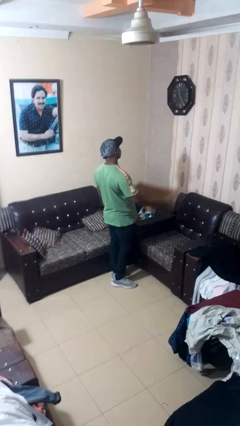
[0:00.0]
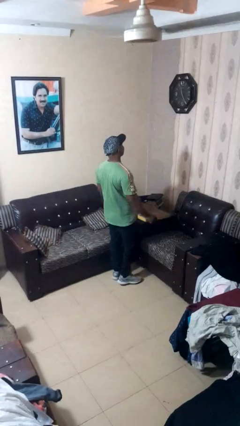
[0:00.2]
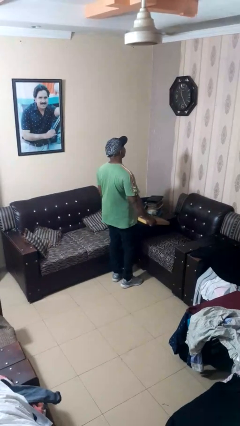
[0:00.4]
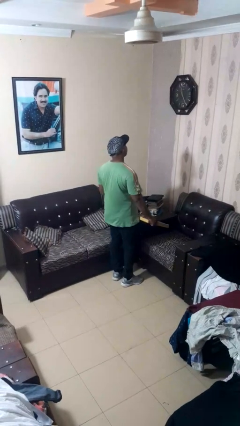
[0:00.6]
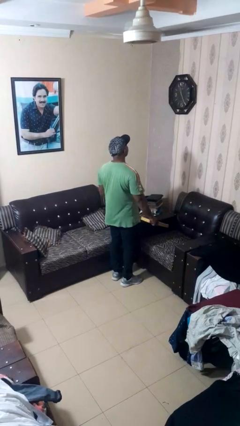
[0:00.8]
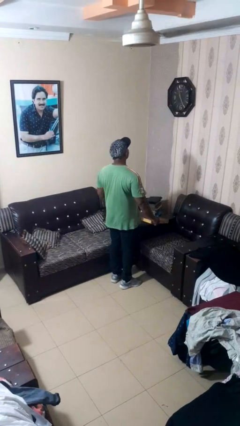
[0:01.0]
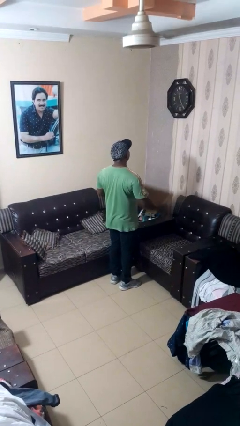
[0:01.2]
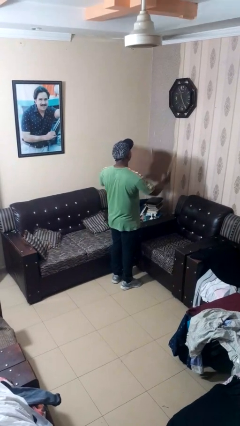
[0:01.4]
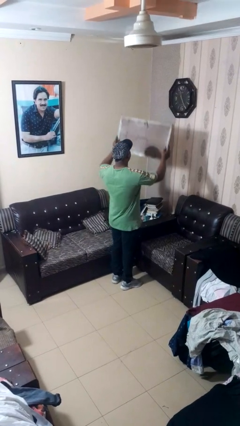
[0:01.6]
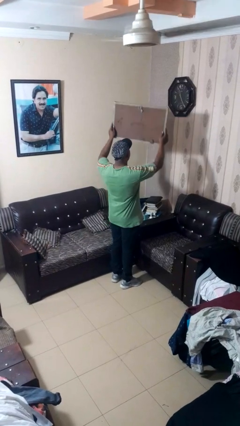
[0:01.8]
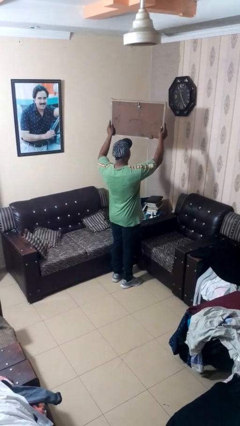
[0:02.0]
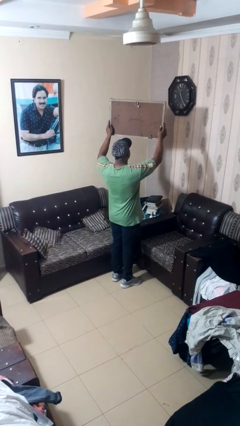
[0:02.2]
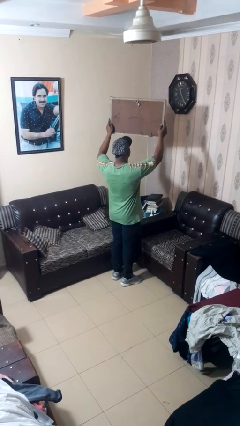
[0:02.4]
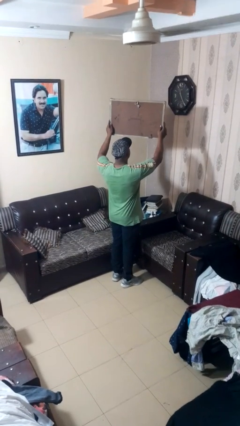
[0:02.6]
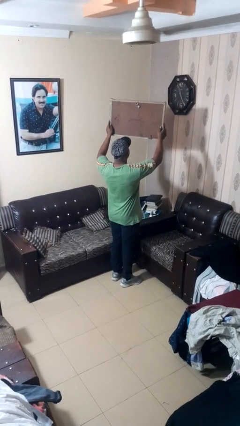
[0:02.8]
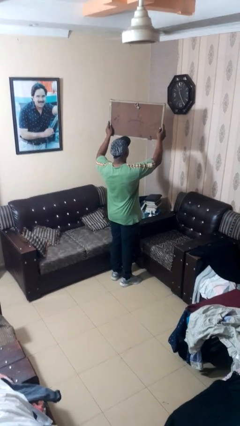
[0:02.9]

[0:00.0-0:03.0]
person holds object above head

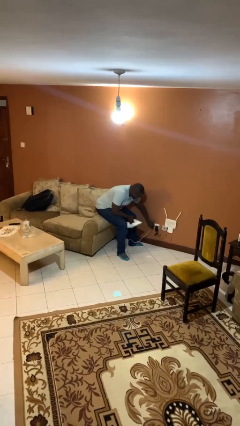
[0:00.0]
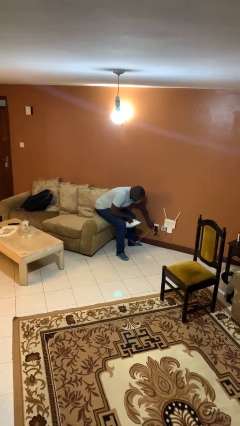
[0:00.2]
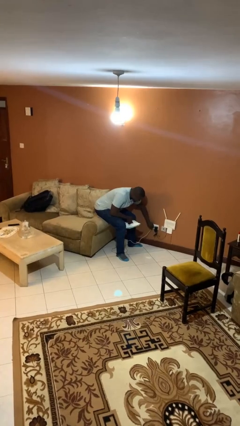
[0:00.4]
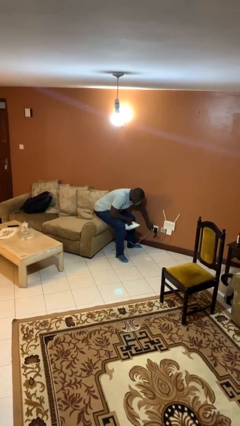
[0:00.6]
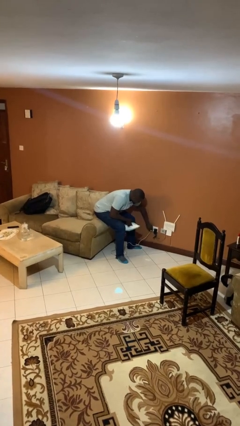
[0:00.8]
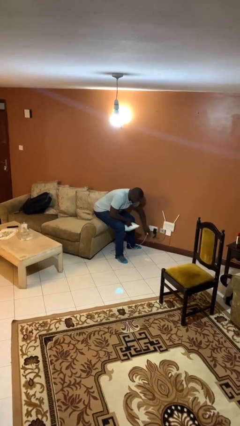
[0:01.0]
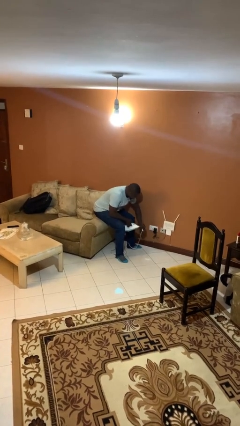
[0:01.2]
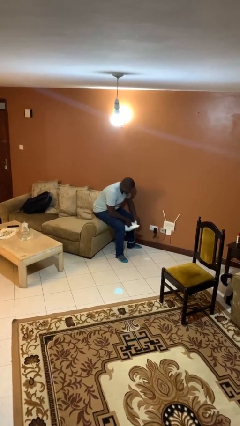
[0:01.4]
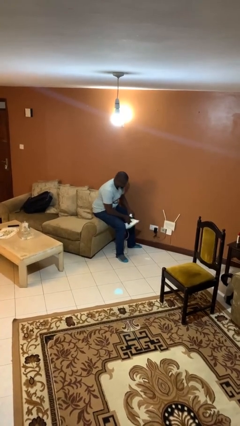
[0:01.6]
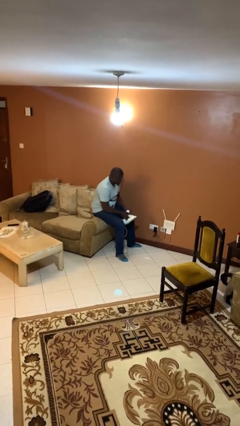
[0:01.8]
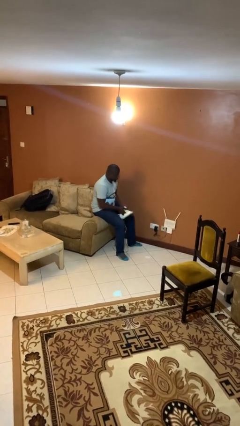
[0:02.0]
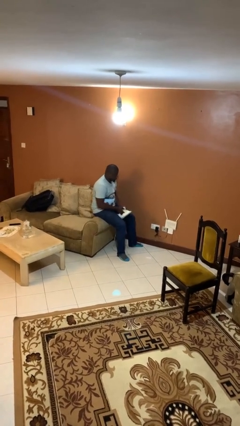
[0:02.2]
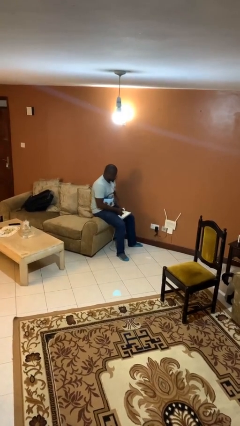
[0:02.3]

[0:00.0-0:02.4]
person unplugs from electrical socket

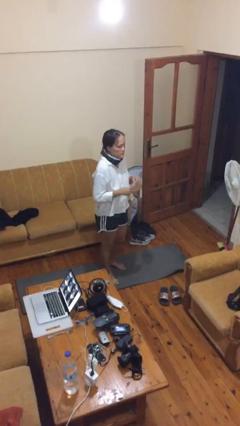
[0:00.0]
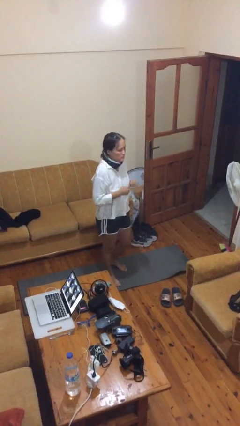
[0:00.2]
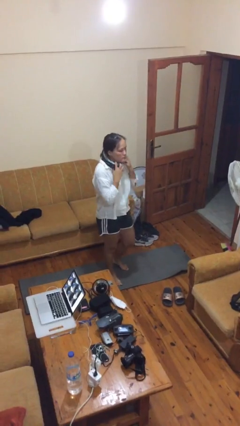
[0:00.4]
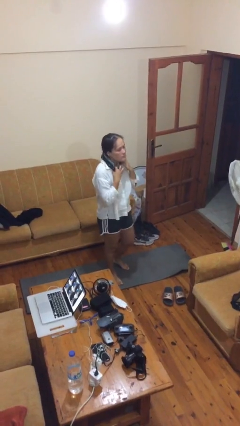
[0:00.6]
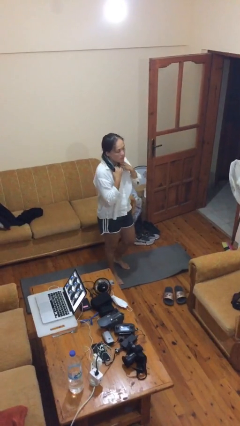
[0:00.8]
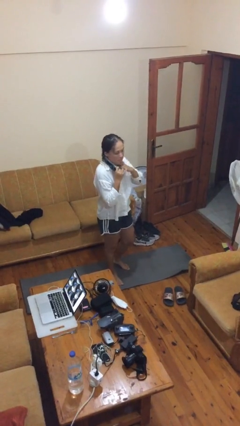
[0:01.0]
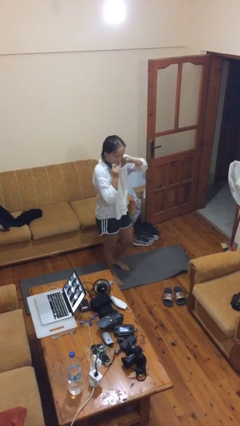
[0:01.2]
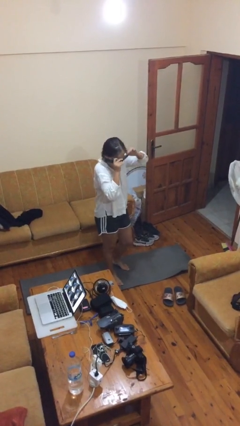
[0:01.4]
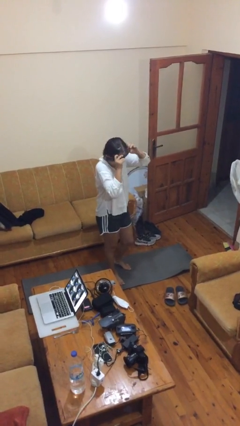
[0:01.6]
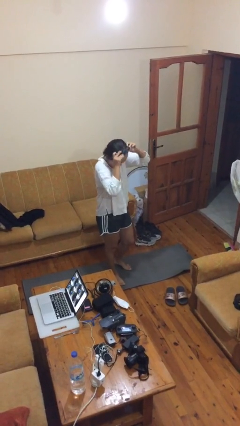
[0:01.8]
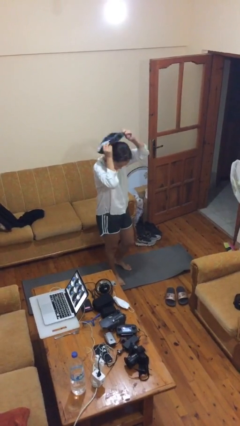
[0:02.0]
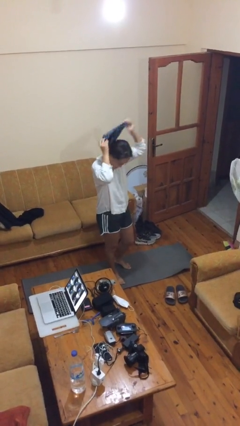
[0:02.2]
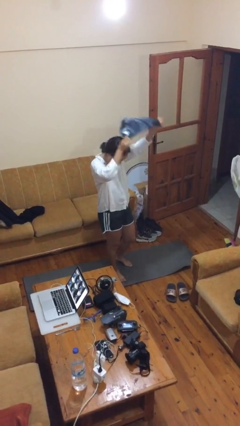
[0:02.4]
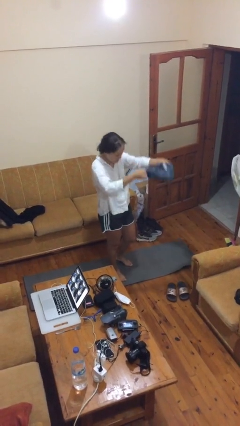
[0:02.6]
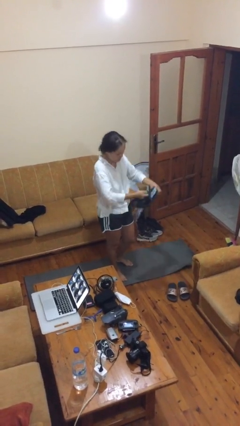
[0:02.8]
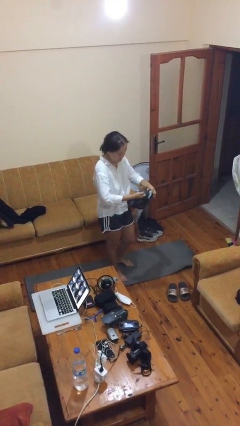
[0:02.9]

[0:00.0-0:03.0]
person takes off scarf

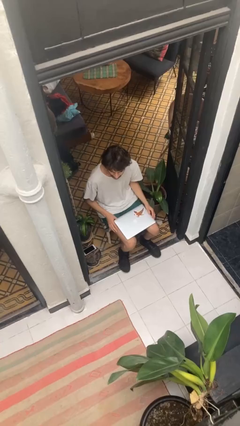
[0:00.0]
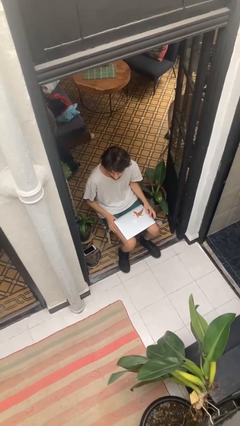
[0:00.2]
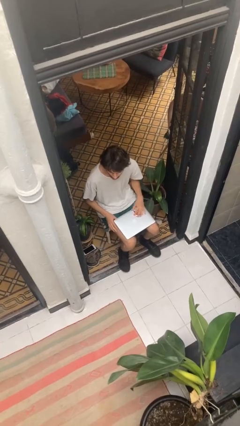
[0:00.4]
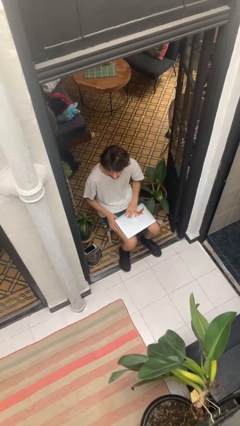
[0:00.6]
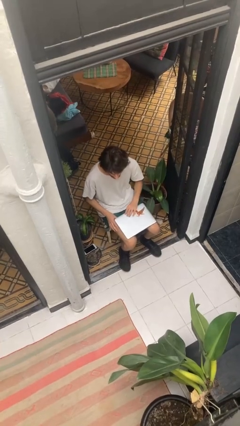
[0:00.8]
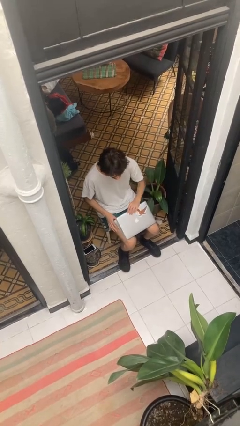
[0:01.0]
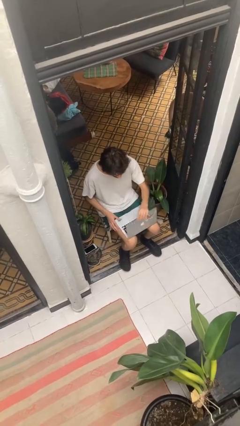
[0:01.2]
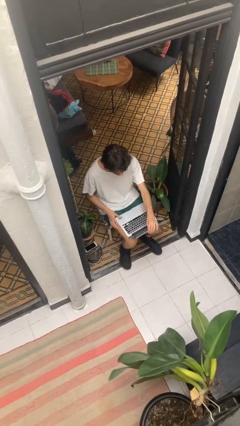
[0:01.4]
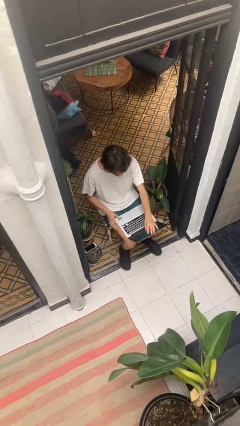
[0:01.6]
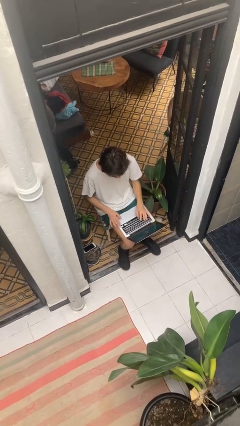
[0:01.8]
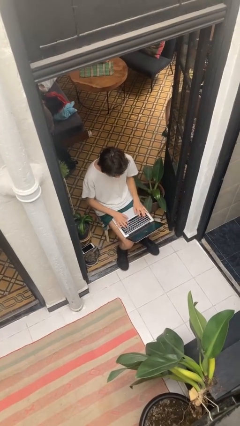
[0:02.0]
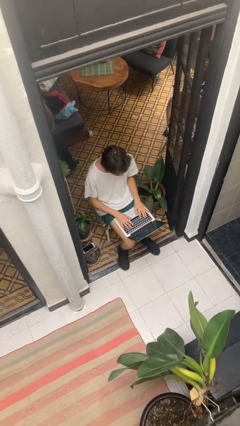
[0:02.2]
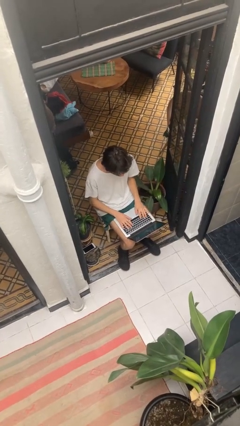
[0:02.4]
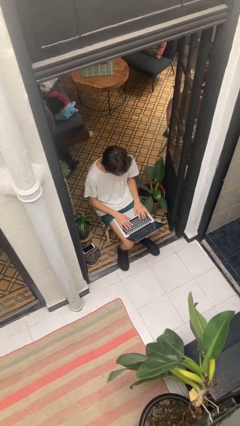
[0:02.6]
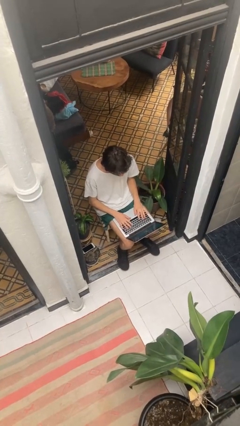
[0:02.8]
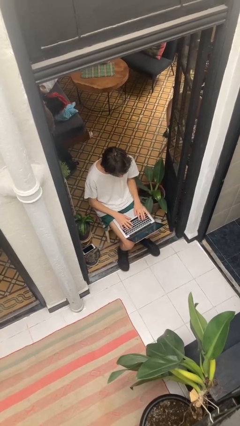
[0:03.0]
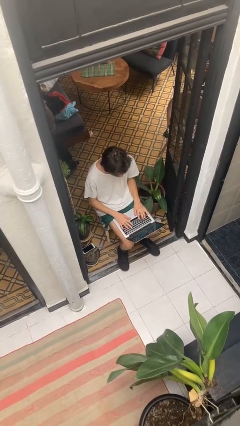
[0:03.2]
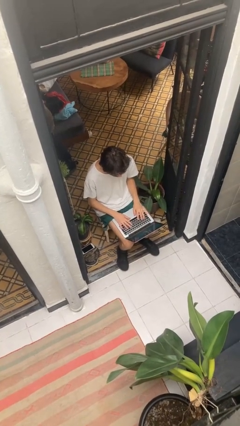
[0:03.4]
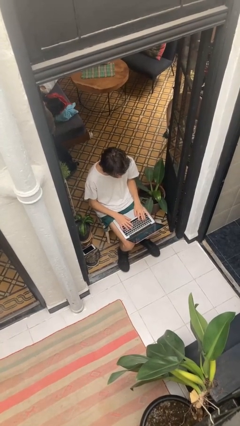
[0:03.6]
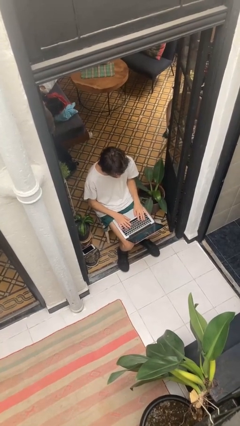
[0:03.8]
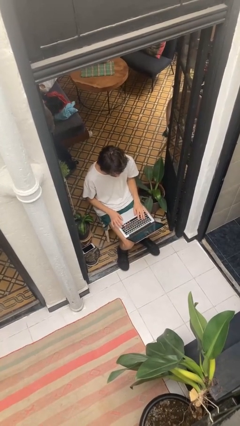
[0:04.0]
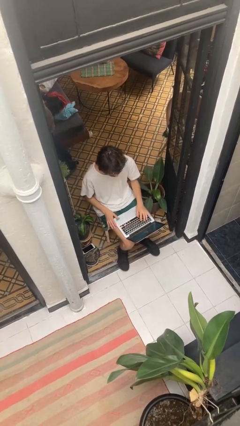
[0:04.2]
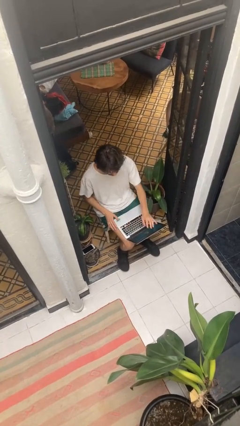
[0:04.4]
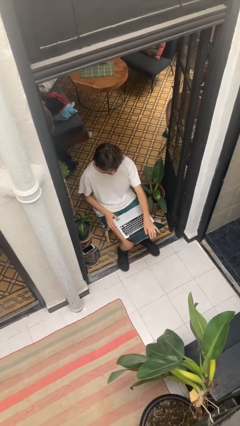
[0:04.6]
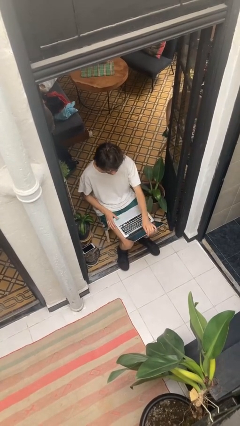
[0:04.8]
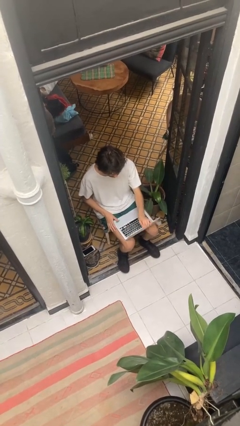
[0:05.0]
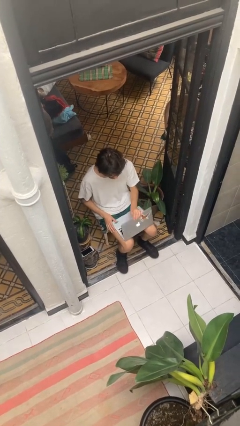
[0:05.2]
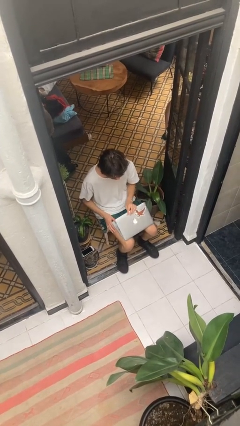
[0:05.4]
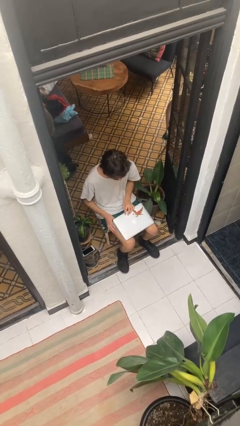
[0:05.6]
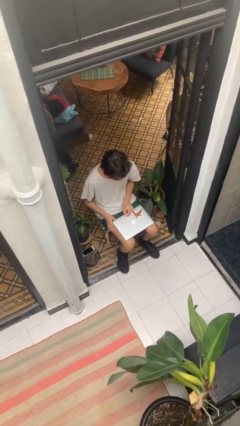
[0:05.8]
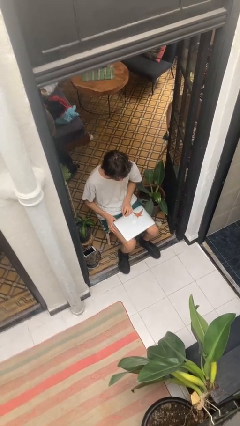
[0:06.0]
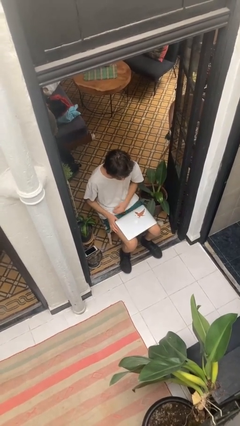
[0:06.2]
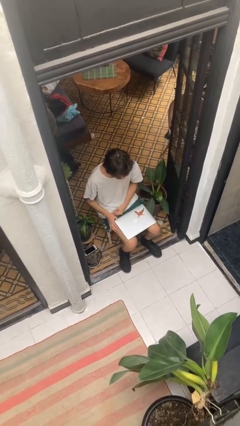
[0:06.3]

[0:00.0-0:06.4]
person interacts with laptop

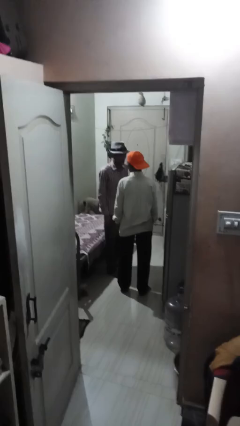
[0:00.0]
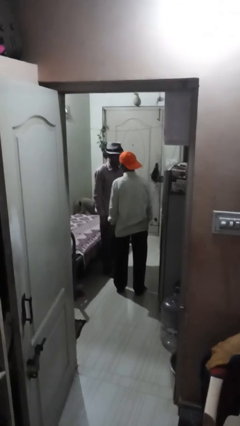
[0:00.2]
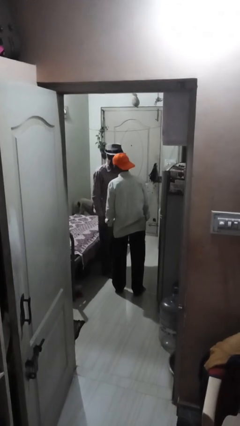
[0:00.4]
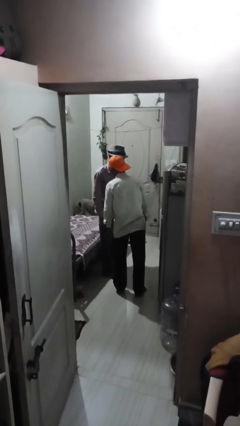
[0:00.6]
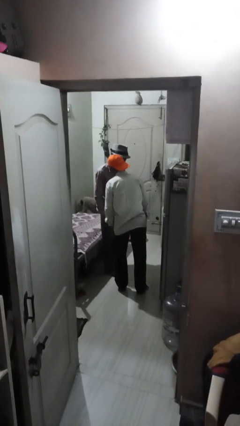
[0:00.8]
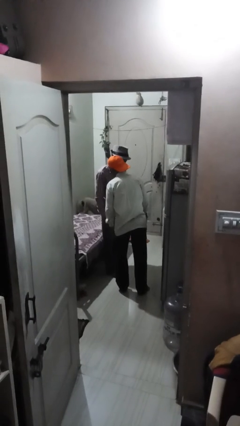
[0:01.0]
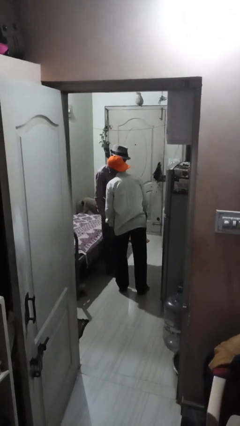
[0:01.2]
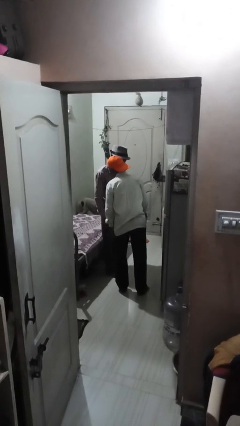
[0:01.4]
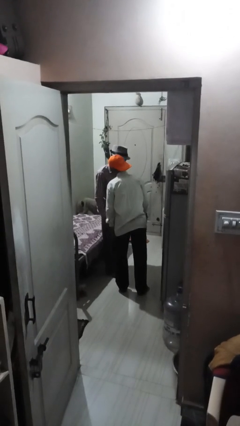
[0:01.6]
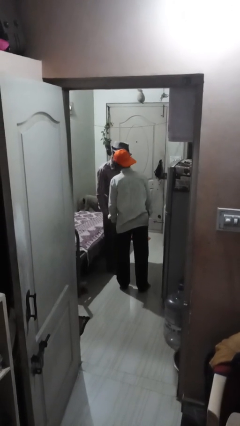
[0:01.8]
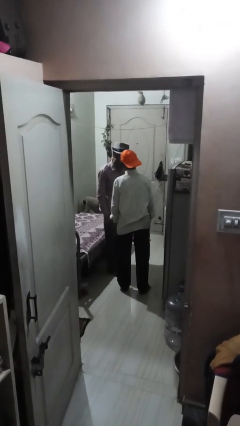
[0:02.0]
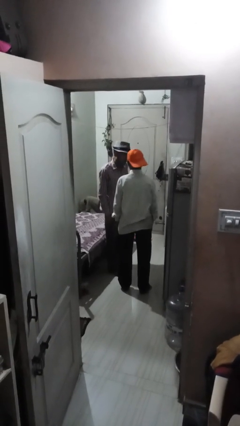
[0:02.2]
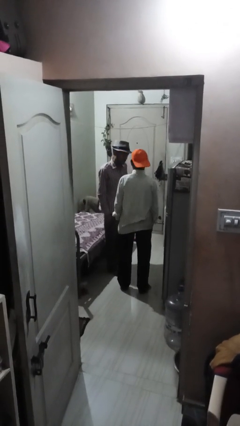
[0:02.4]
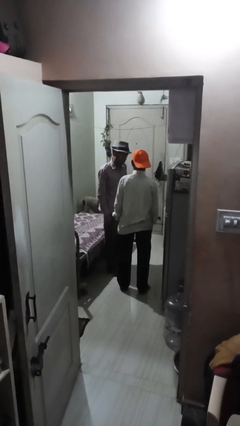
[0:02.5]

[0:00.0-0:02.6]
person kisses cheek of person

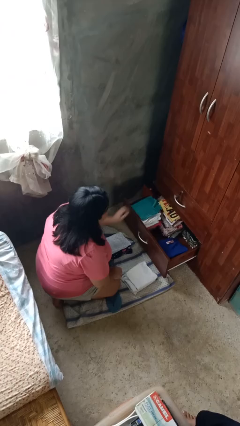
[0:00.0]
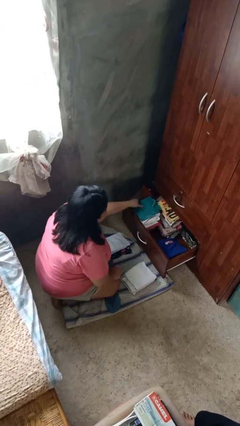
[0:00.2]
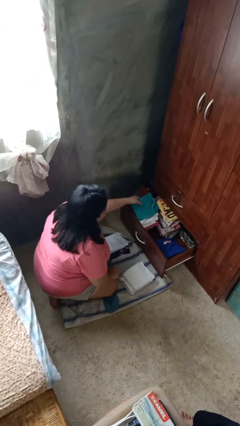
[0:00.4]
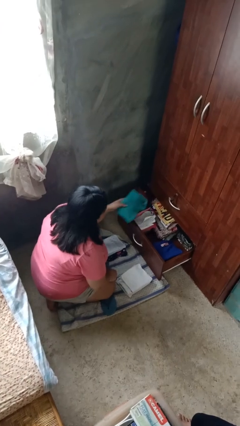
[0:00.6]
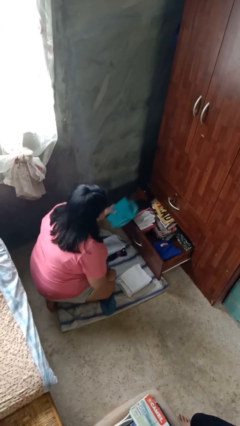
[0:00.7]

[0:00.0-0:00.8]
person takes clothes from dresser
